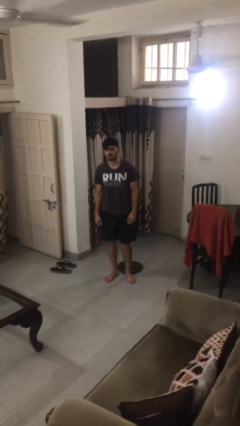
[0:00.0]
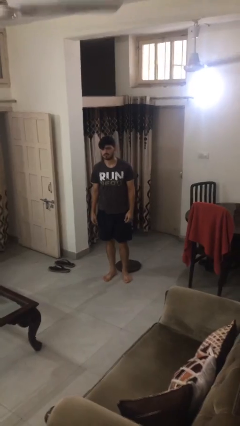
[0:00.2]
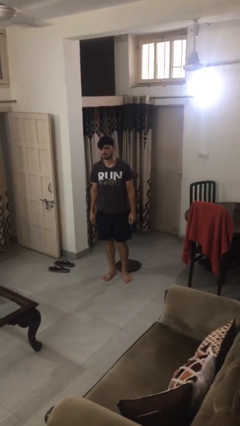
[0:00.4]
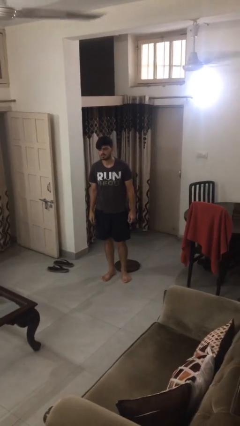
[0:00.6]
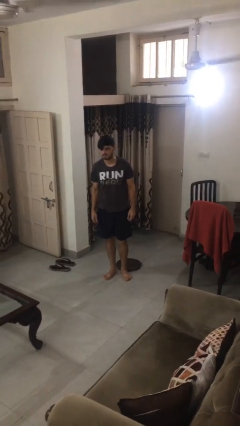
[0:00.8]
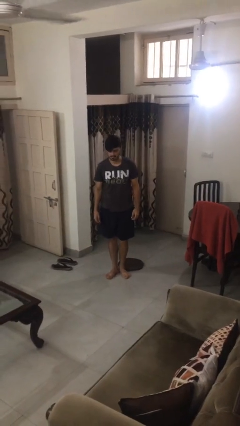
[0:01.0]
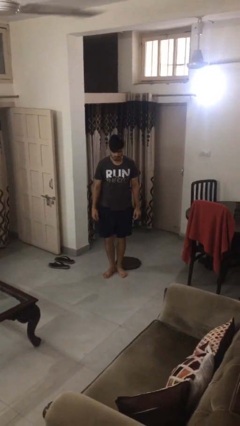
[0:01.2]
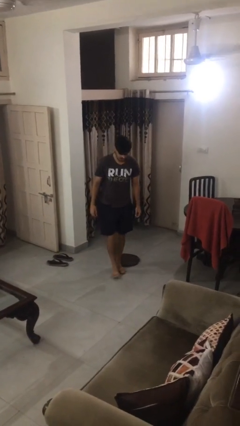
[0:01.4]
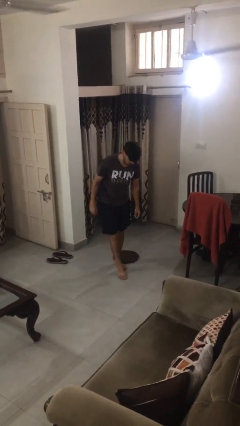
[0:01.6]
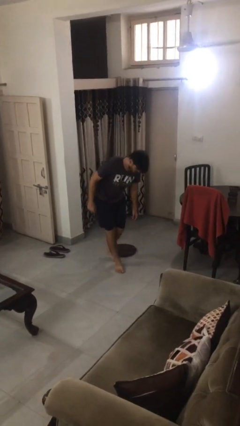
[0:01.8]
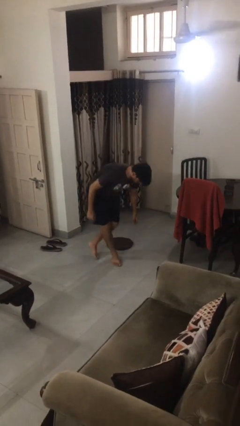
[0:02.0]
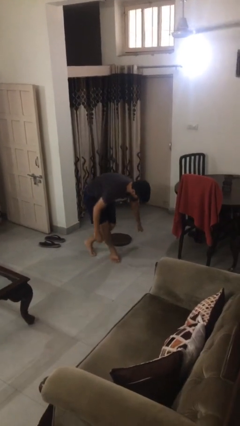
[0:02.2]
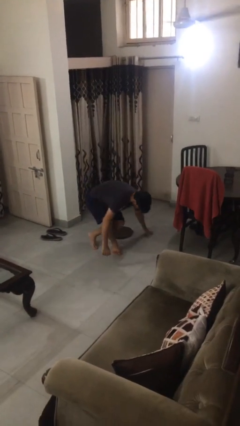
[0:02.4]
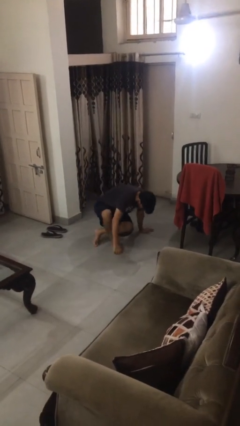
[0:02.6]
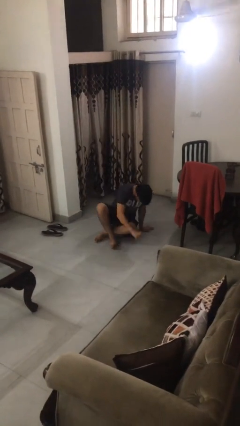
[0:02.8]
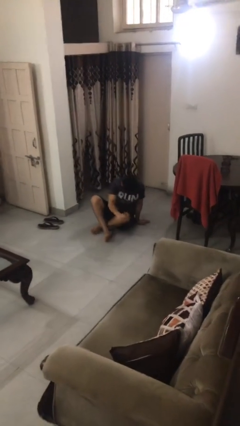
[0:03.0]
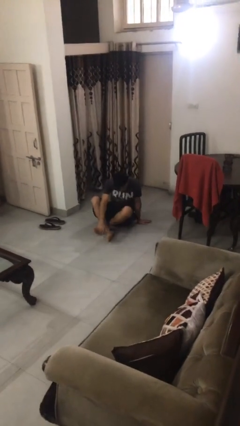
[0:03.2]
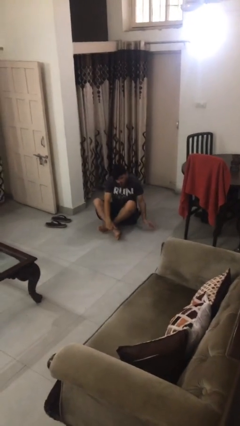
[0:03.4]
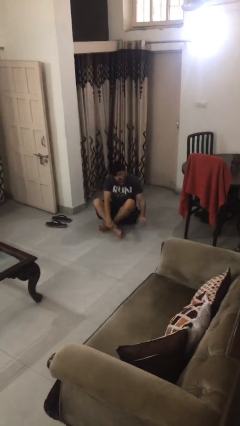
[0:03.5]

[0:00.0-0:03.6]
person sits crisscross

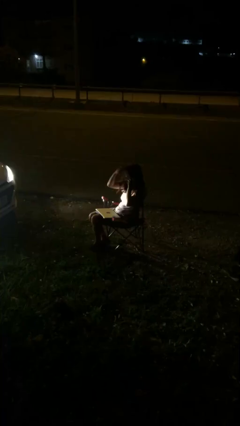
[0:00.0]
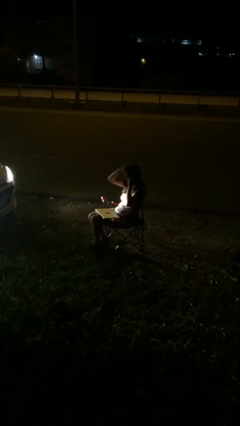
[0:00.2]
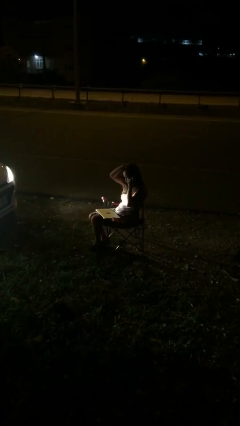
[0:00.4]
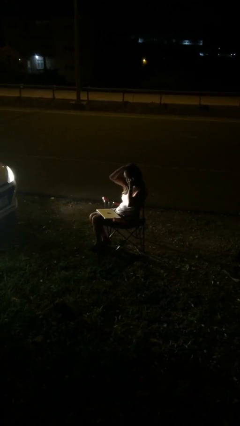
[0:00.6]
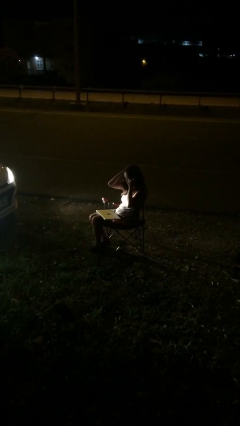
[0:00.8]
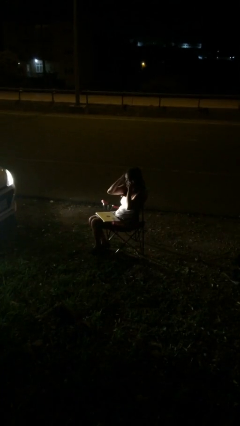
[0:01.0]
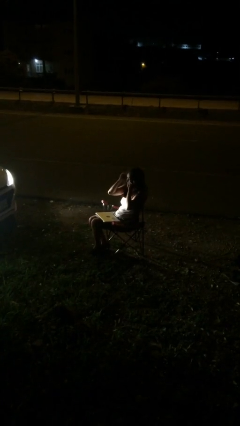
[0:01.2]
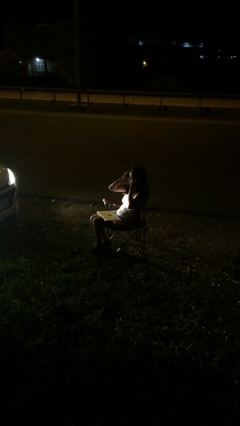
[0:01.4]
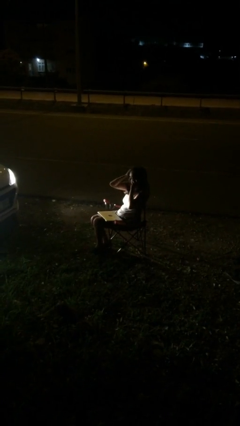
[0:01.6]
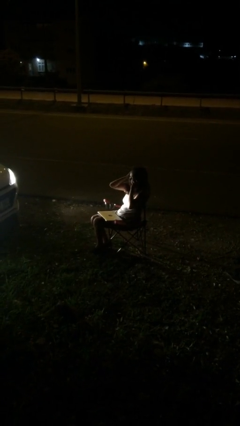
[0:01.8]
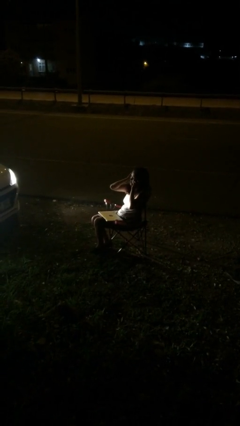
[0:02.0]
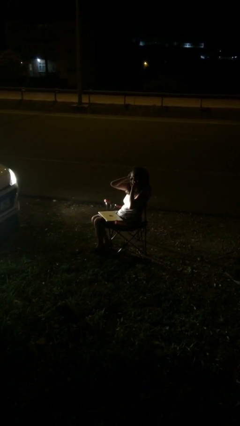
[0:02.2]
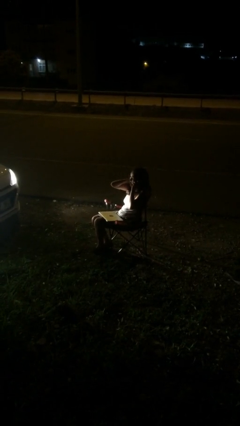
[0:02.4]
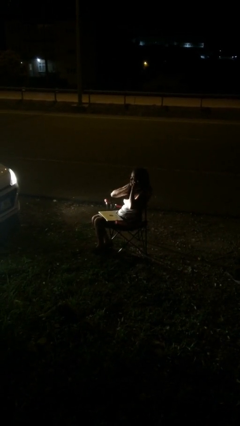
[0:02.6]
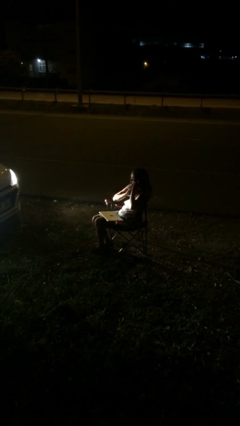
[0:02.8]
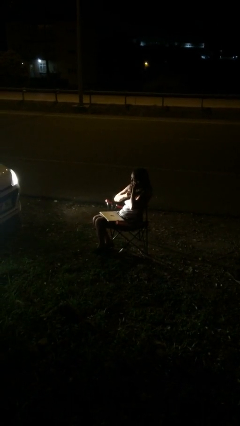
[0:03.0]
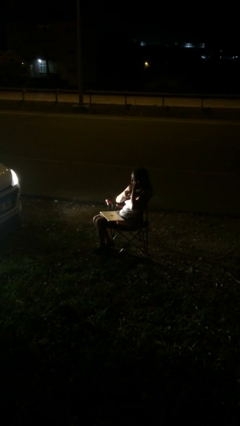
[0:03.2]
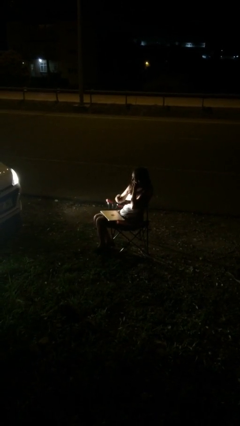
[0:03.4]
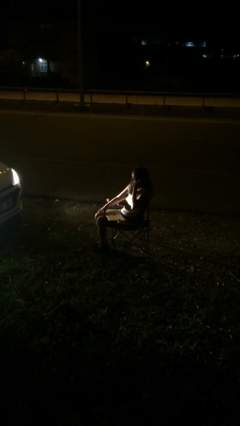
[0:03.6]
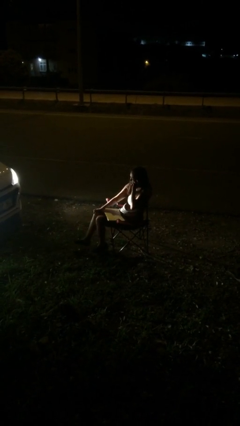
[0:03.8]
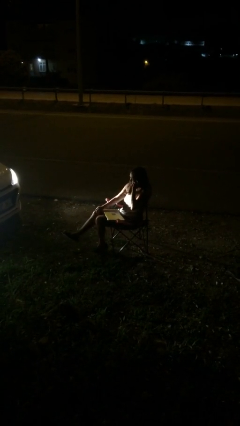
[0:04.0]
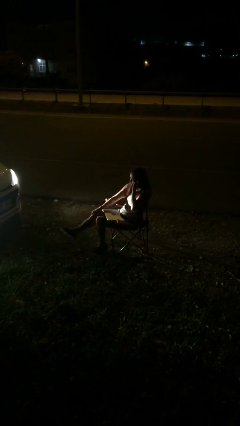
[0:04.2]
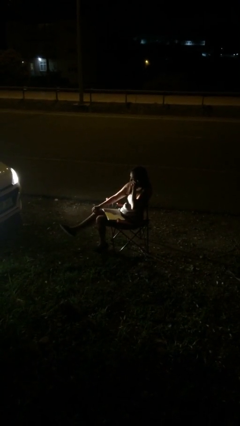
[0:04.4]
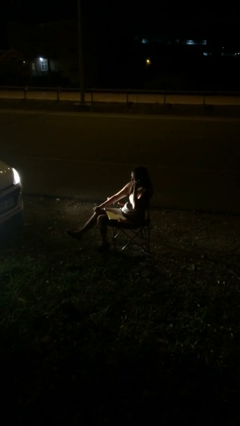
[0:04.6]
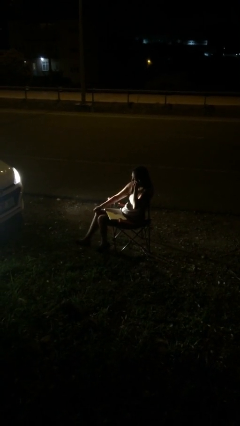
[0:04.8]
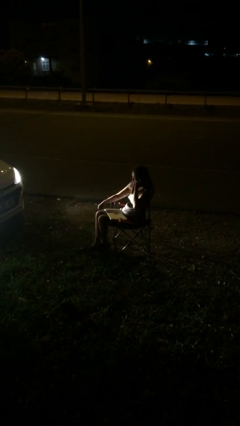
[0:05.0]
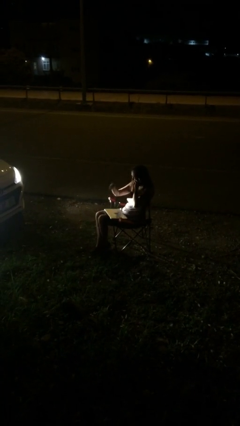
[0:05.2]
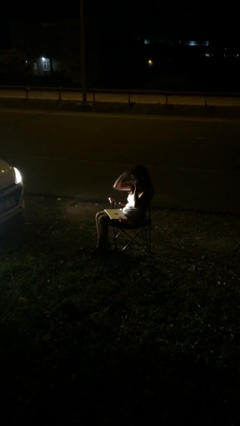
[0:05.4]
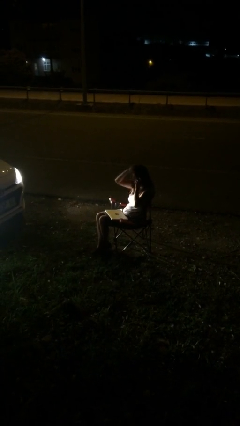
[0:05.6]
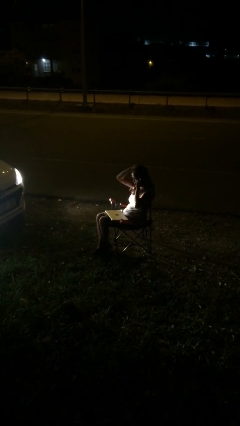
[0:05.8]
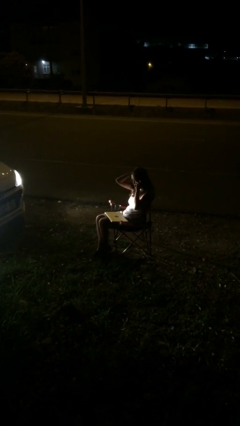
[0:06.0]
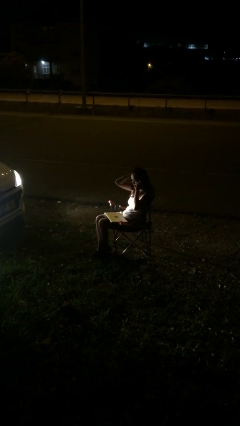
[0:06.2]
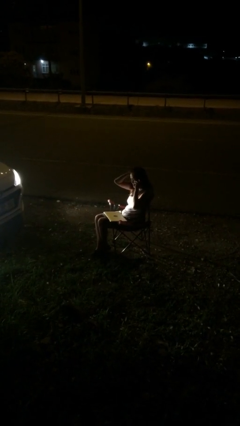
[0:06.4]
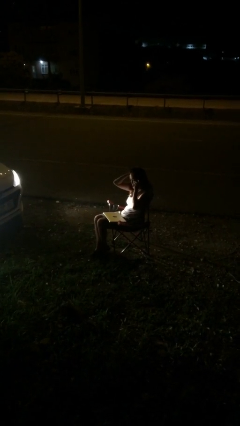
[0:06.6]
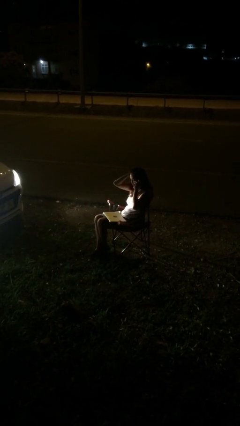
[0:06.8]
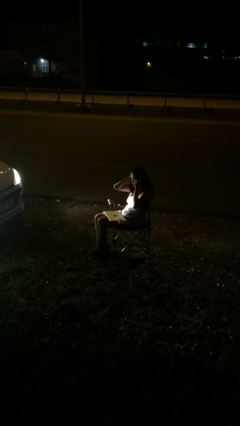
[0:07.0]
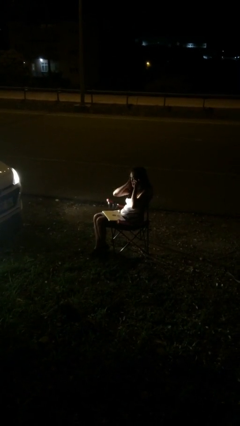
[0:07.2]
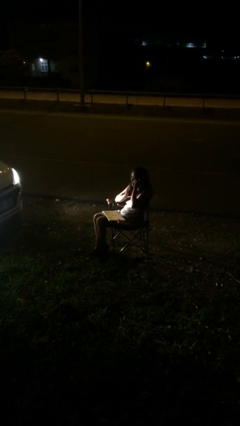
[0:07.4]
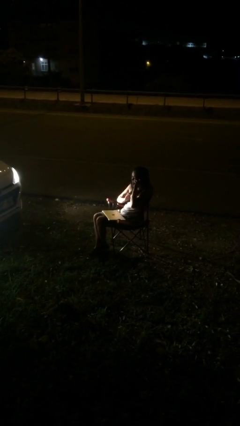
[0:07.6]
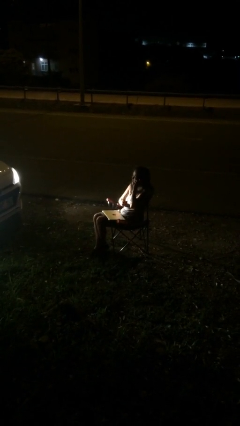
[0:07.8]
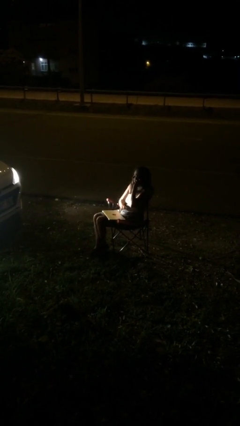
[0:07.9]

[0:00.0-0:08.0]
person talks on phone

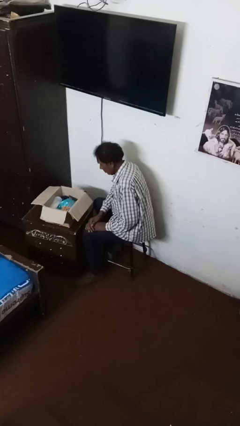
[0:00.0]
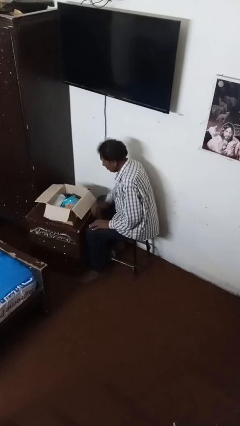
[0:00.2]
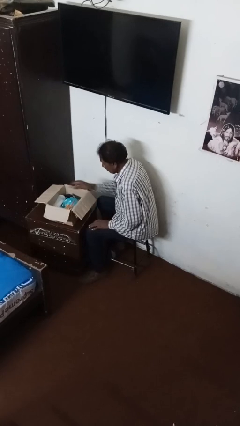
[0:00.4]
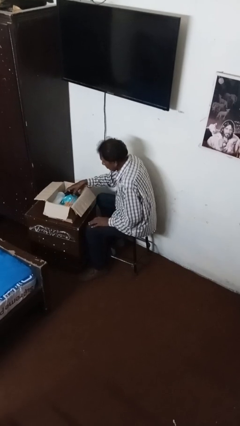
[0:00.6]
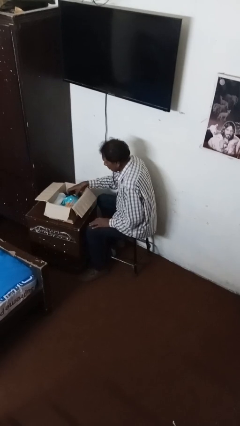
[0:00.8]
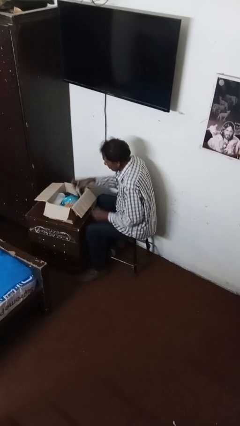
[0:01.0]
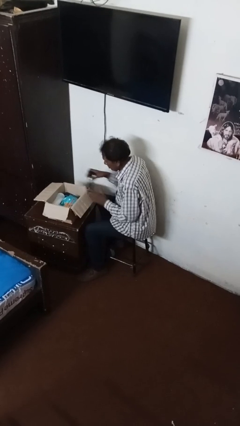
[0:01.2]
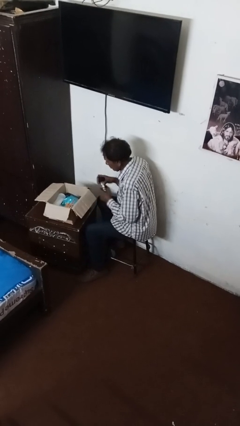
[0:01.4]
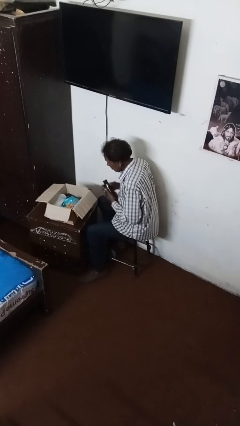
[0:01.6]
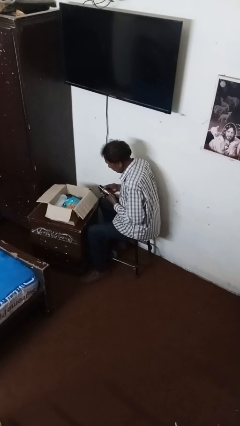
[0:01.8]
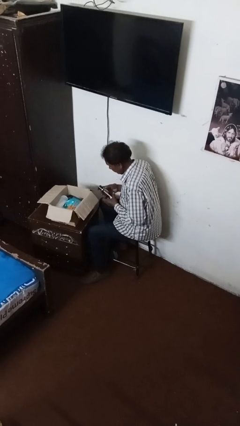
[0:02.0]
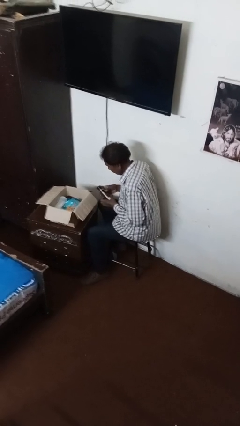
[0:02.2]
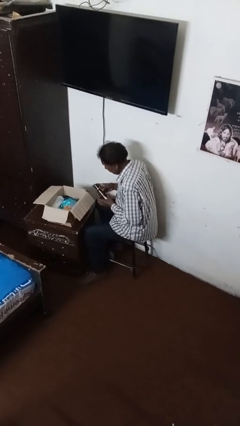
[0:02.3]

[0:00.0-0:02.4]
person searches in box

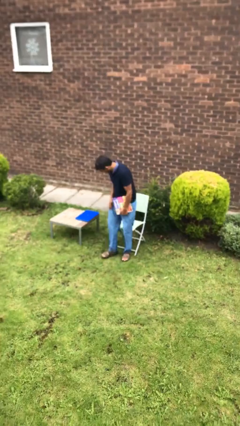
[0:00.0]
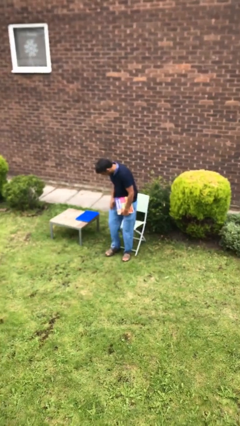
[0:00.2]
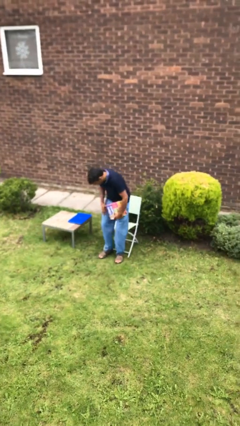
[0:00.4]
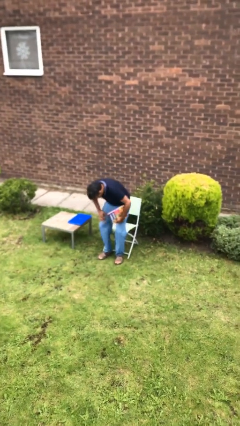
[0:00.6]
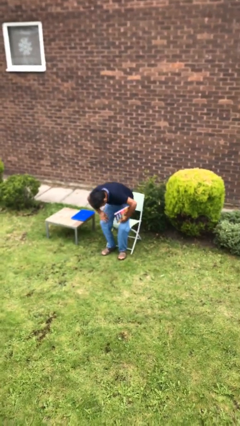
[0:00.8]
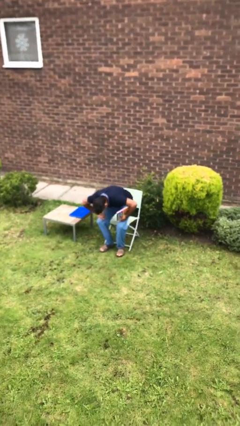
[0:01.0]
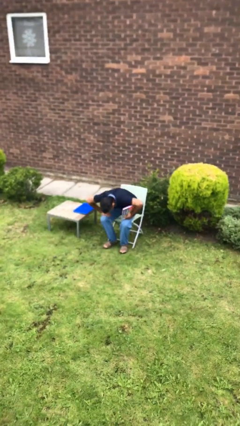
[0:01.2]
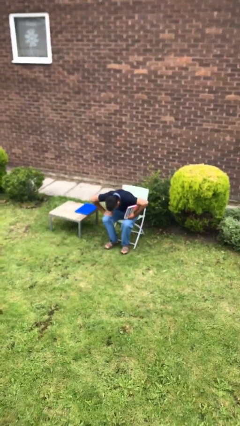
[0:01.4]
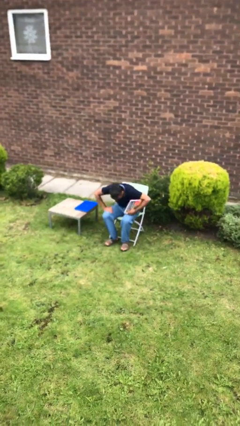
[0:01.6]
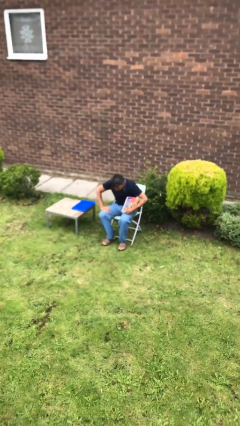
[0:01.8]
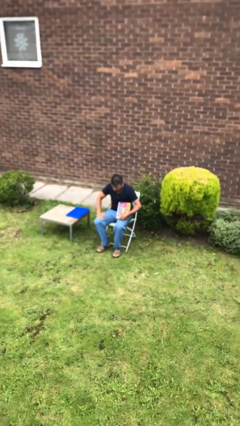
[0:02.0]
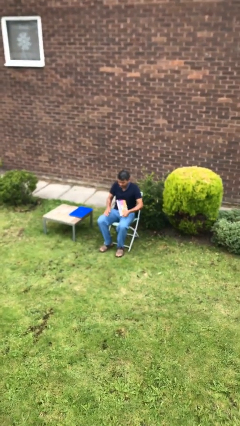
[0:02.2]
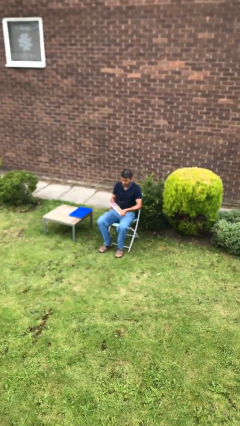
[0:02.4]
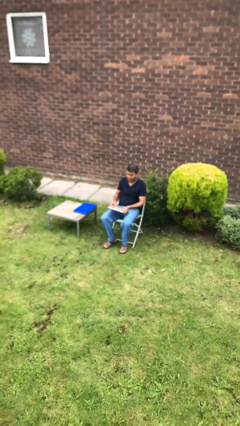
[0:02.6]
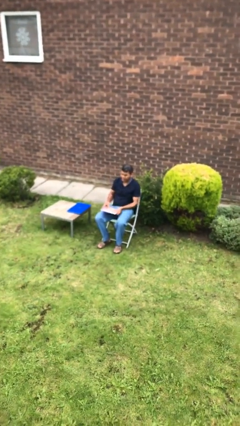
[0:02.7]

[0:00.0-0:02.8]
person sits down

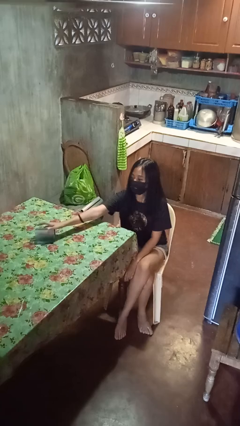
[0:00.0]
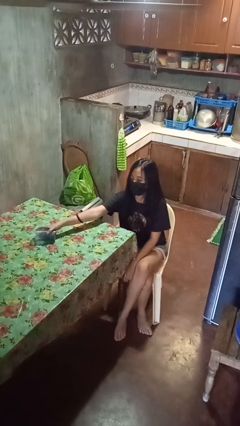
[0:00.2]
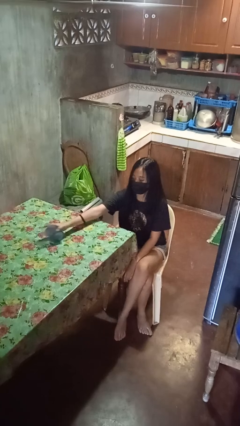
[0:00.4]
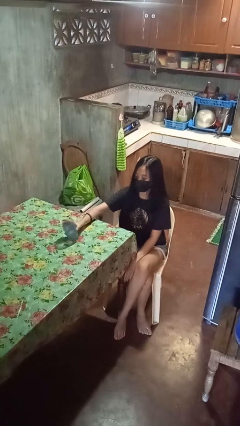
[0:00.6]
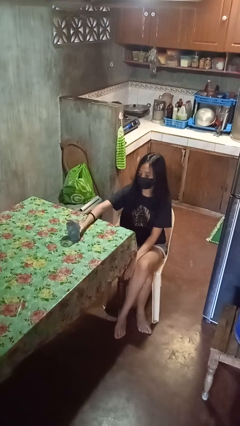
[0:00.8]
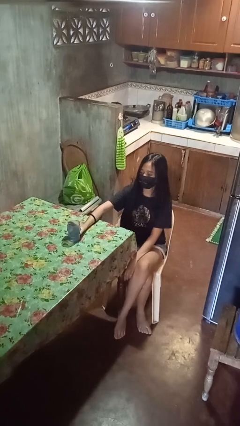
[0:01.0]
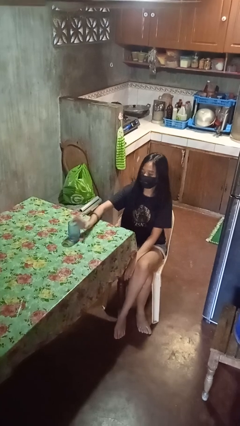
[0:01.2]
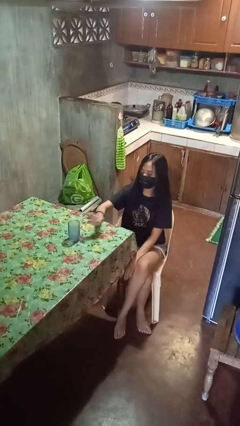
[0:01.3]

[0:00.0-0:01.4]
person sets upright glass
